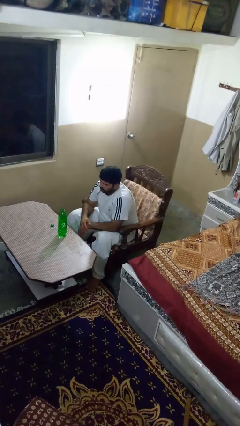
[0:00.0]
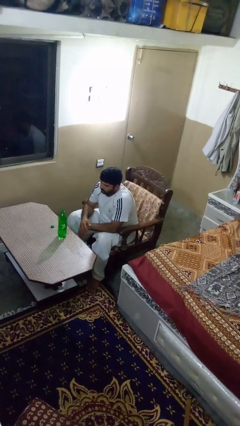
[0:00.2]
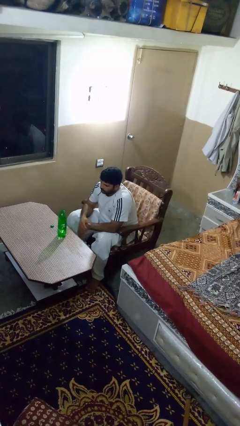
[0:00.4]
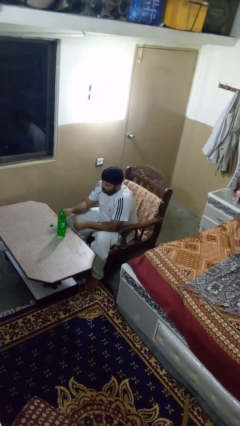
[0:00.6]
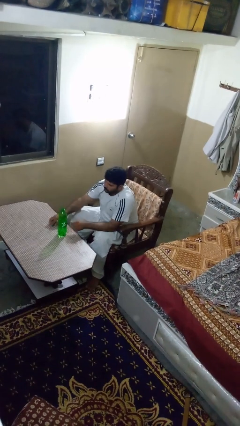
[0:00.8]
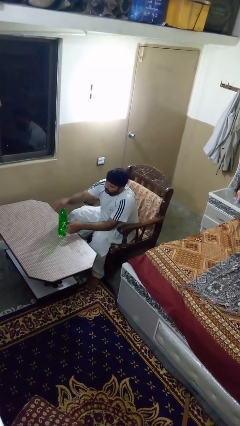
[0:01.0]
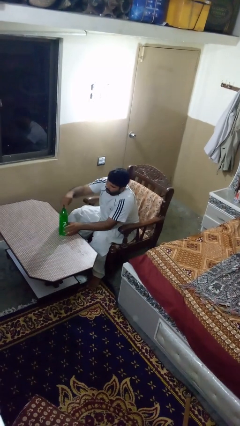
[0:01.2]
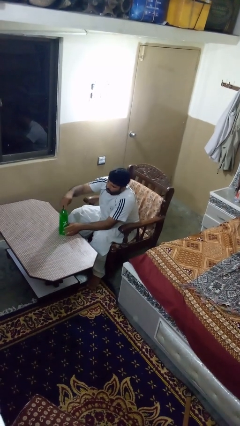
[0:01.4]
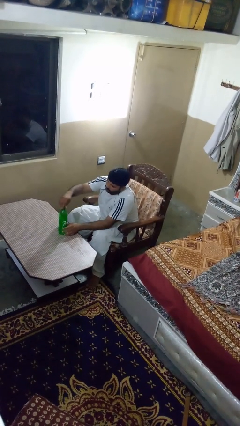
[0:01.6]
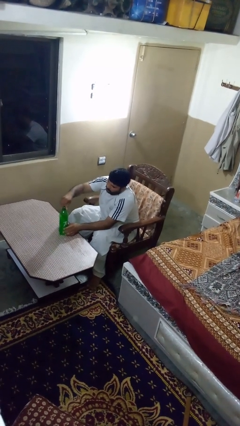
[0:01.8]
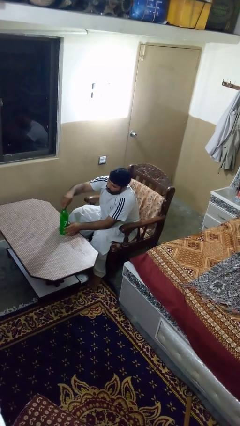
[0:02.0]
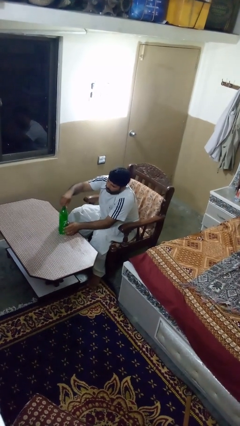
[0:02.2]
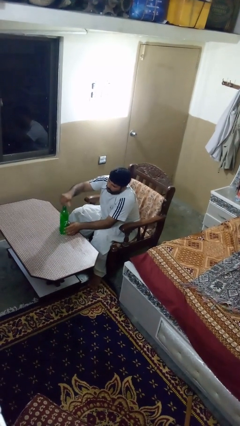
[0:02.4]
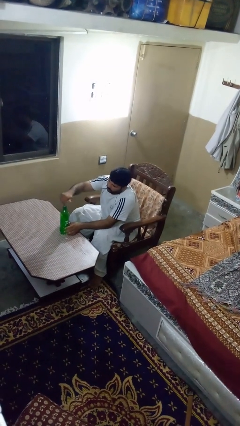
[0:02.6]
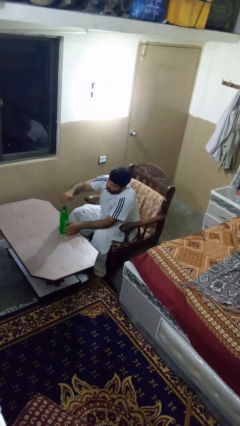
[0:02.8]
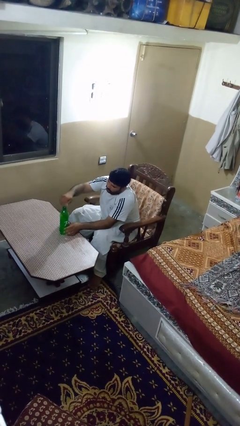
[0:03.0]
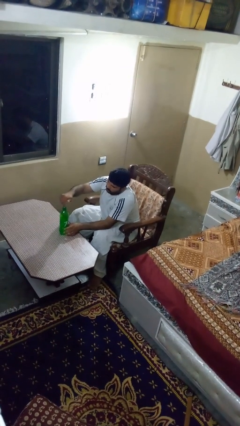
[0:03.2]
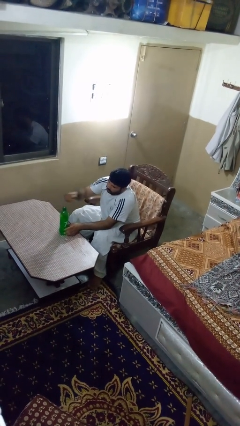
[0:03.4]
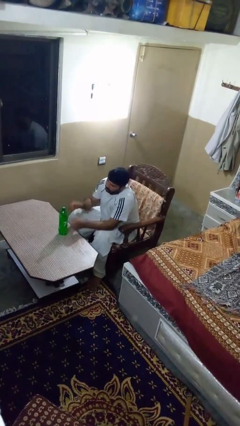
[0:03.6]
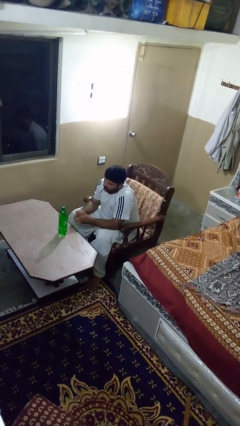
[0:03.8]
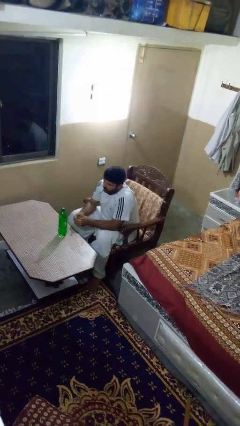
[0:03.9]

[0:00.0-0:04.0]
person screws lid to bottle

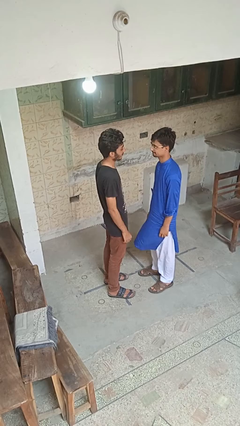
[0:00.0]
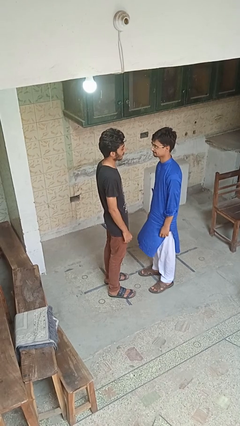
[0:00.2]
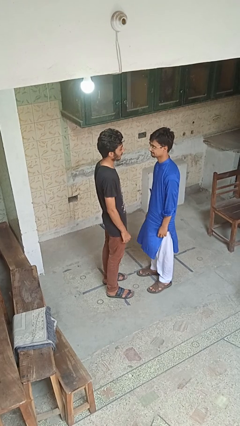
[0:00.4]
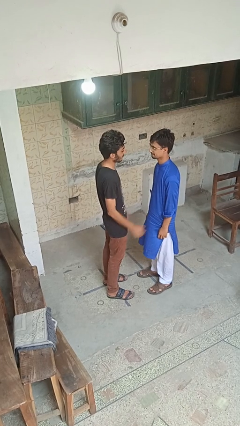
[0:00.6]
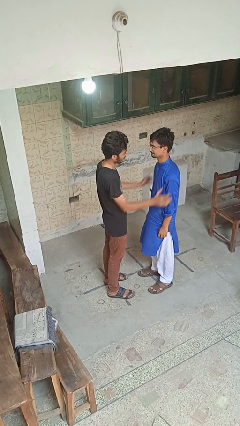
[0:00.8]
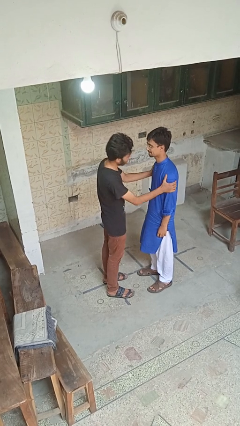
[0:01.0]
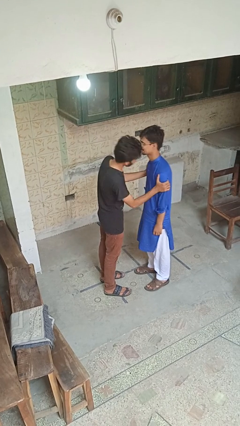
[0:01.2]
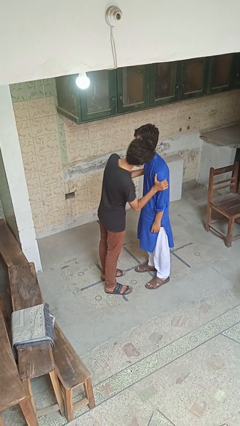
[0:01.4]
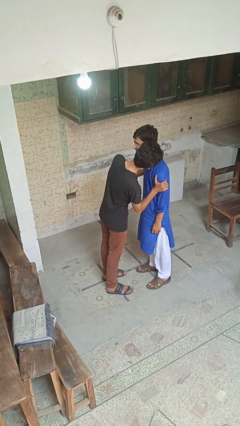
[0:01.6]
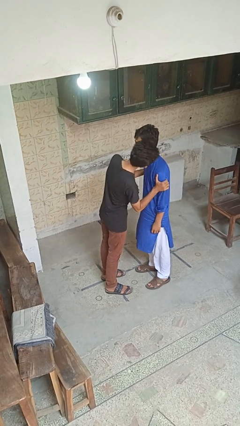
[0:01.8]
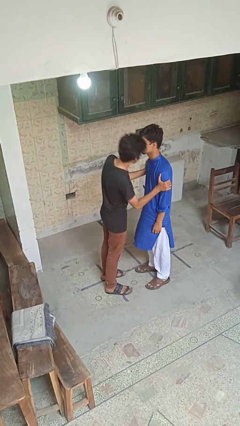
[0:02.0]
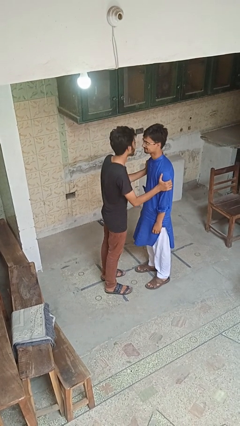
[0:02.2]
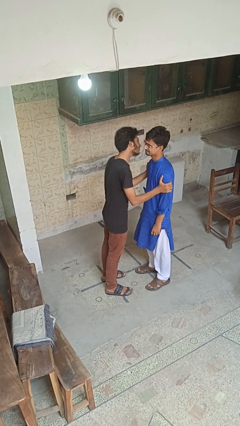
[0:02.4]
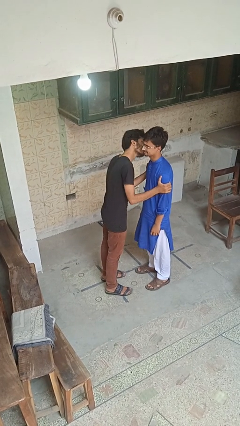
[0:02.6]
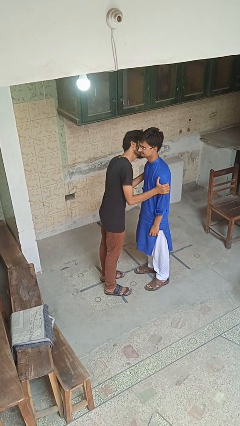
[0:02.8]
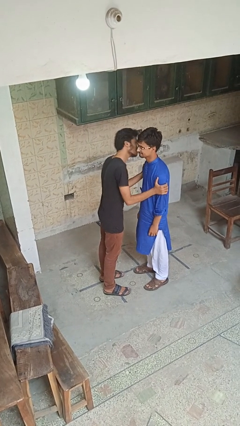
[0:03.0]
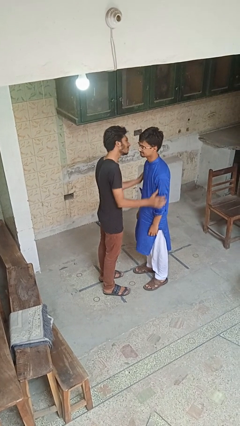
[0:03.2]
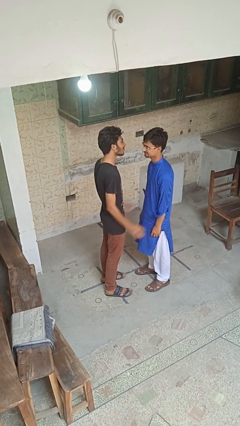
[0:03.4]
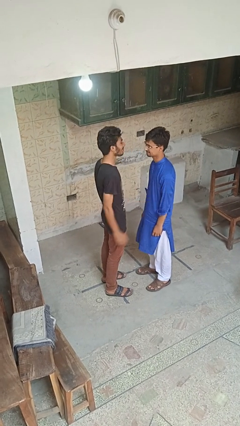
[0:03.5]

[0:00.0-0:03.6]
person kisses cheek of person

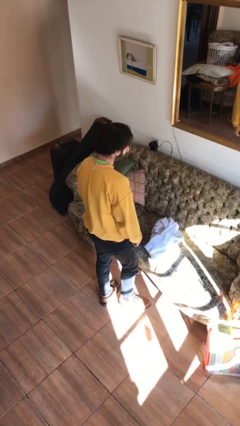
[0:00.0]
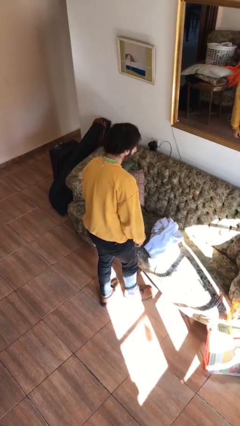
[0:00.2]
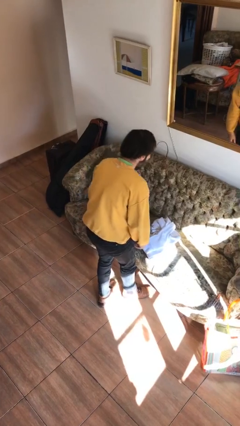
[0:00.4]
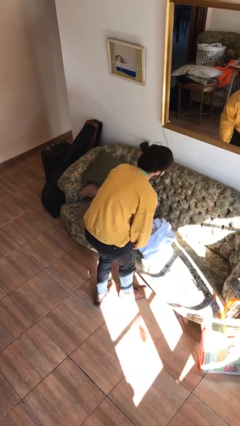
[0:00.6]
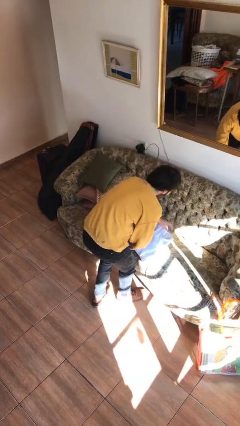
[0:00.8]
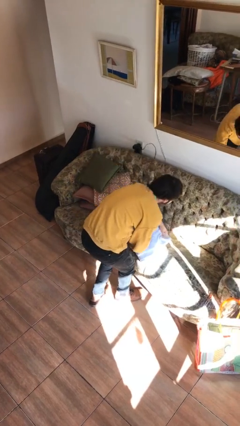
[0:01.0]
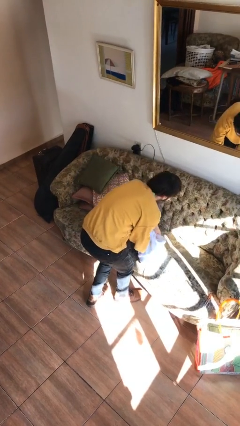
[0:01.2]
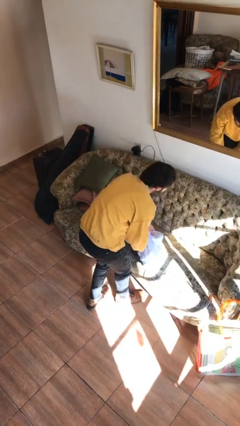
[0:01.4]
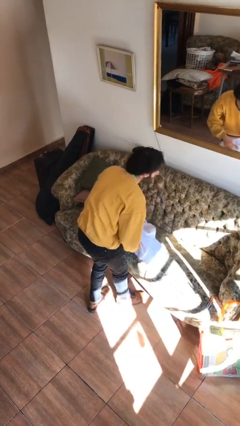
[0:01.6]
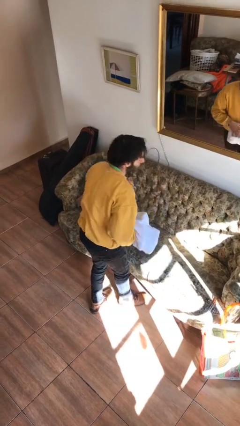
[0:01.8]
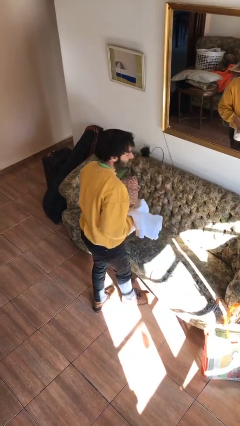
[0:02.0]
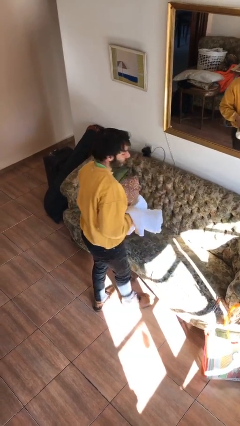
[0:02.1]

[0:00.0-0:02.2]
person picks up object from couch

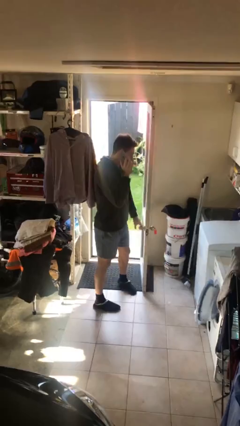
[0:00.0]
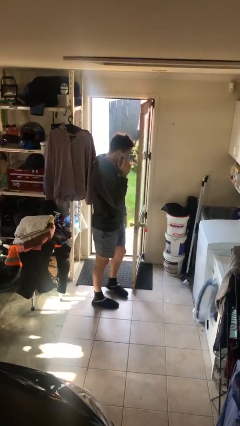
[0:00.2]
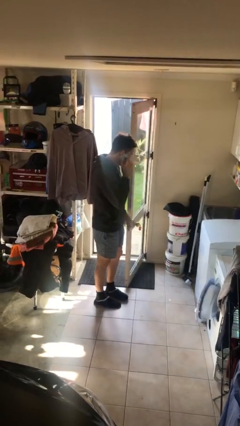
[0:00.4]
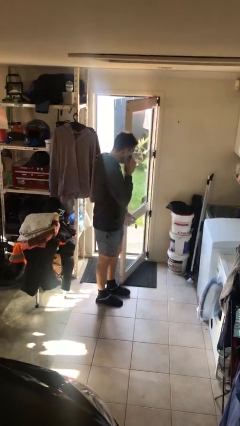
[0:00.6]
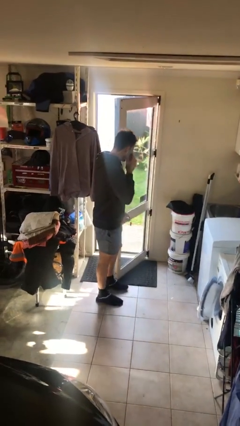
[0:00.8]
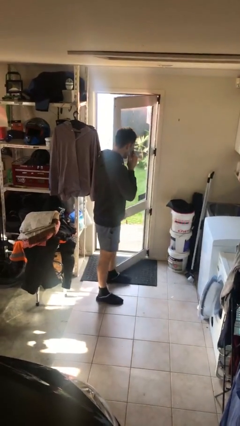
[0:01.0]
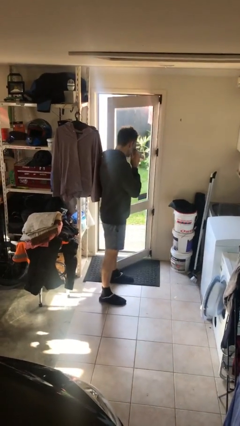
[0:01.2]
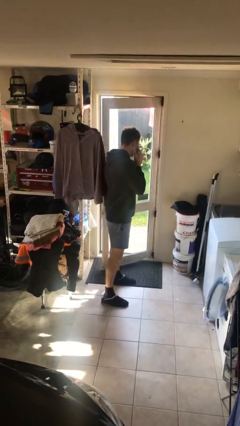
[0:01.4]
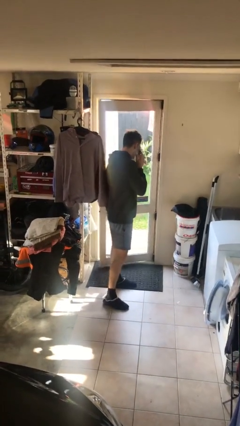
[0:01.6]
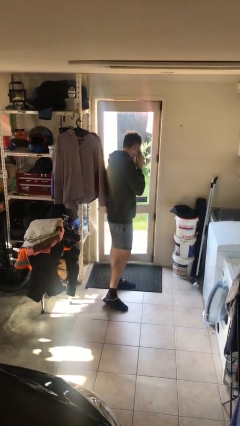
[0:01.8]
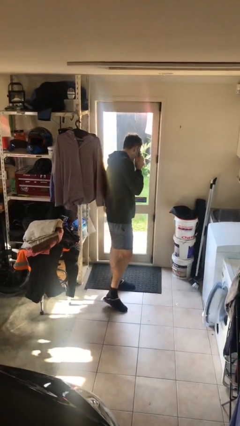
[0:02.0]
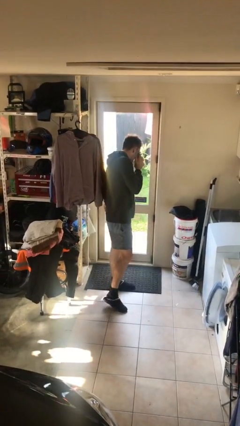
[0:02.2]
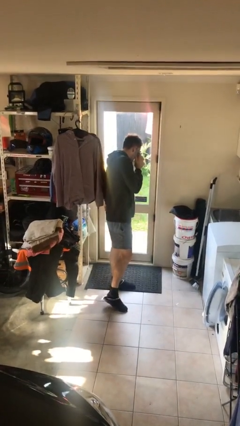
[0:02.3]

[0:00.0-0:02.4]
person closes facility door

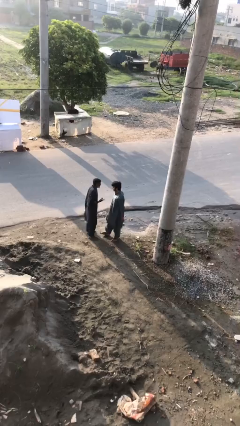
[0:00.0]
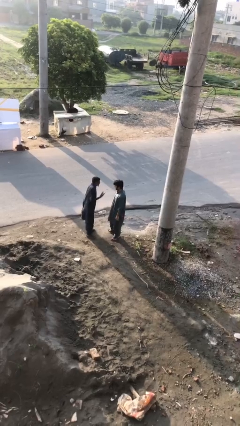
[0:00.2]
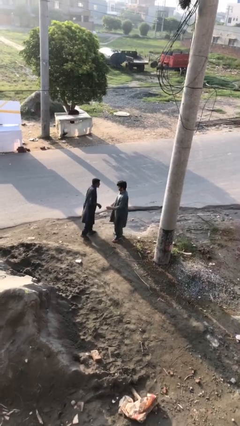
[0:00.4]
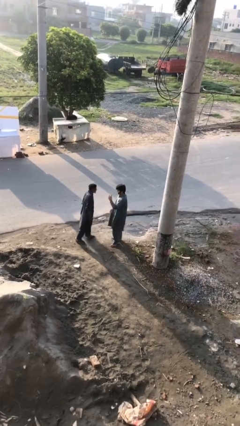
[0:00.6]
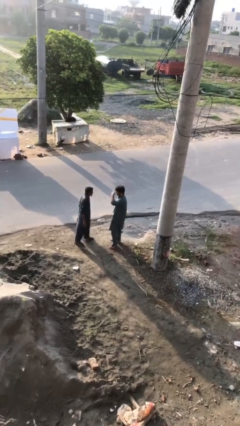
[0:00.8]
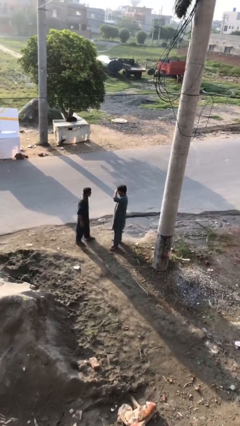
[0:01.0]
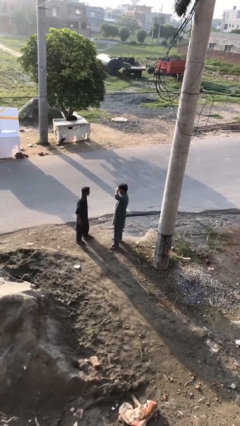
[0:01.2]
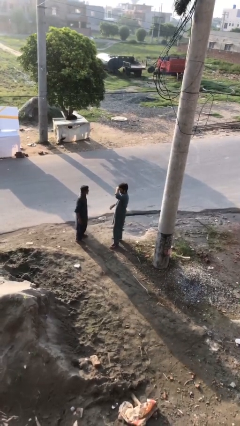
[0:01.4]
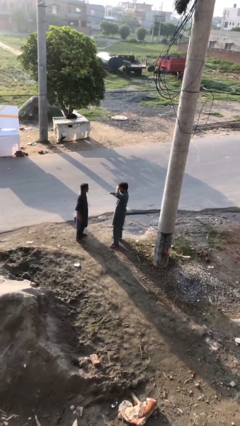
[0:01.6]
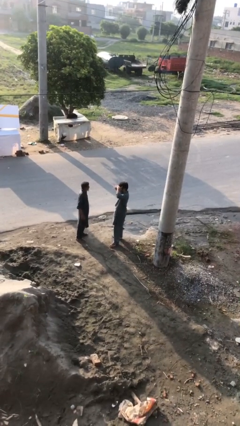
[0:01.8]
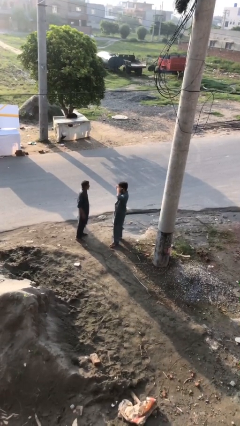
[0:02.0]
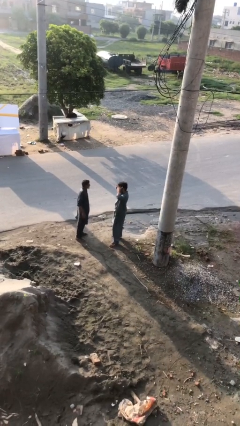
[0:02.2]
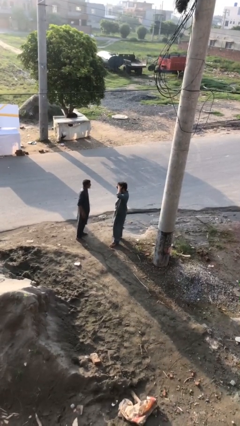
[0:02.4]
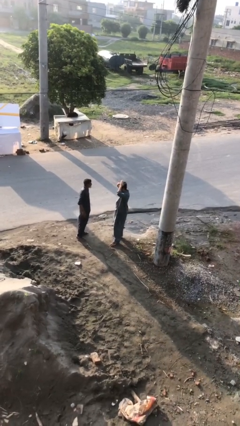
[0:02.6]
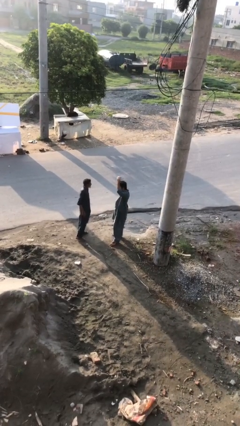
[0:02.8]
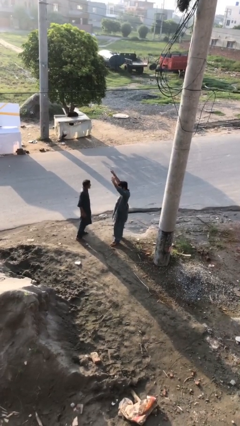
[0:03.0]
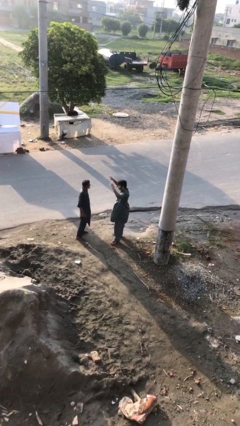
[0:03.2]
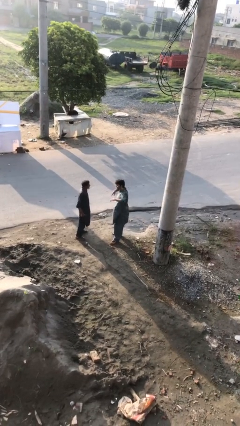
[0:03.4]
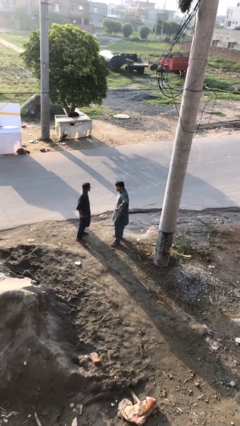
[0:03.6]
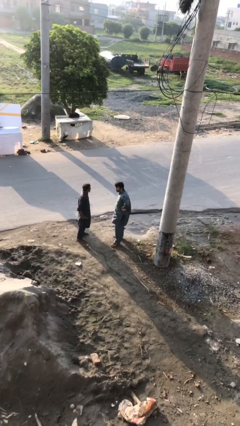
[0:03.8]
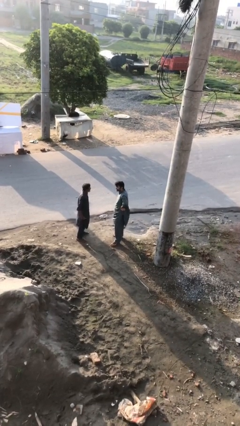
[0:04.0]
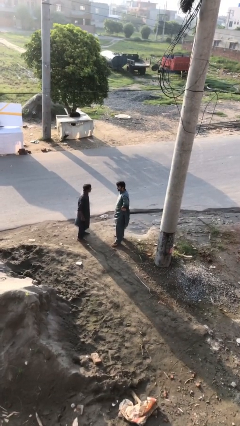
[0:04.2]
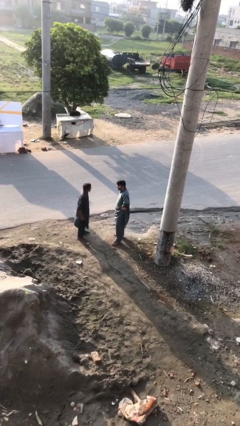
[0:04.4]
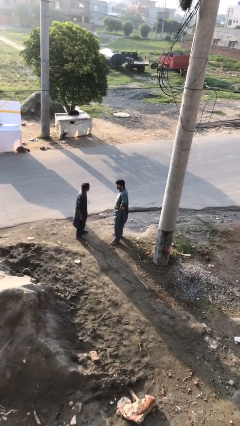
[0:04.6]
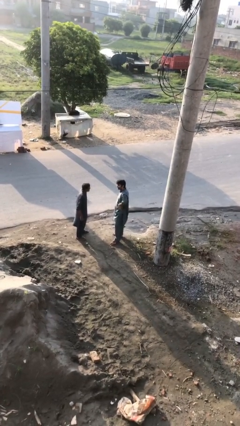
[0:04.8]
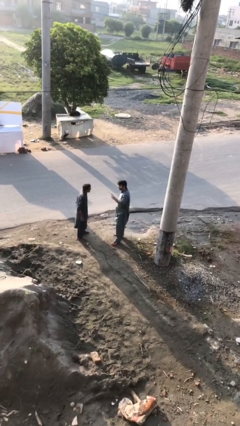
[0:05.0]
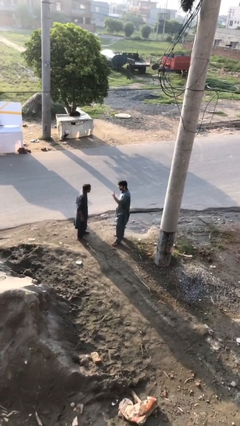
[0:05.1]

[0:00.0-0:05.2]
person talks to person
